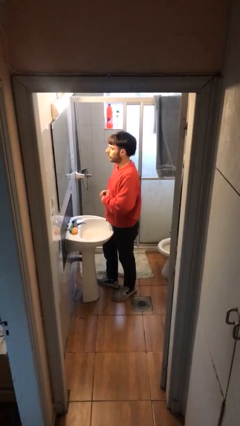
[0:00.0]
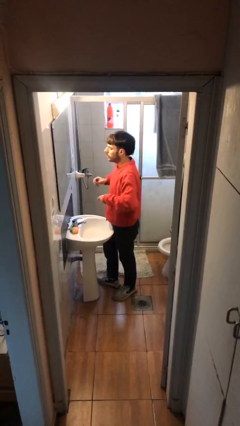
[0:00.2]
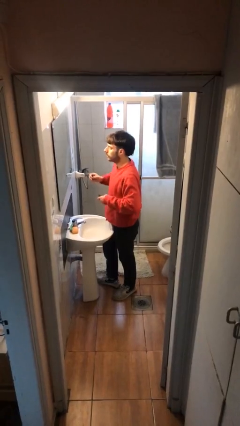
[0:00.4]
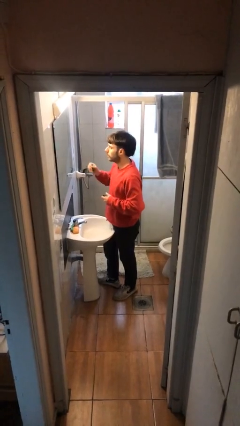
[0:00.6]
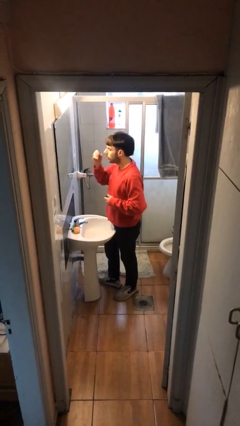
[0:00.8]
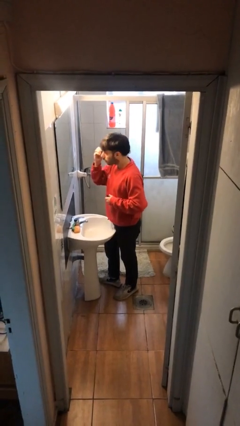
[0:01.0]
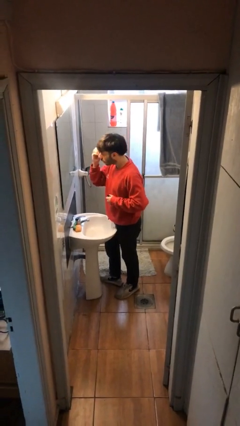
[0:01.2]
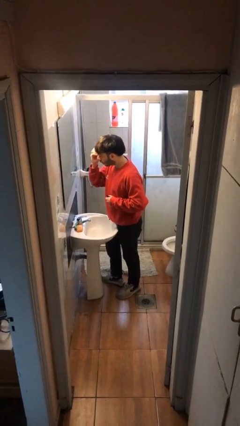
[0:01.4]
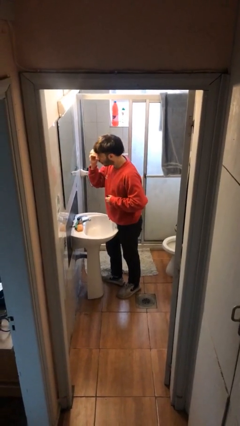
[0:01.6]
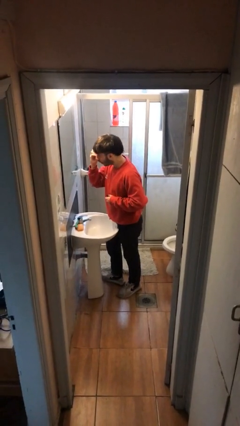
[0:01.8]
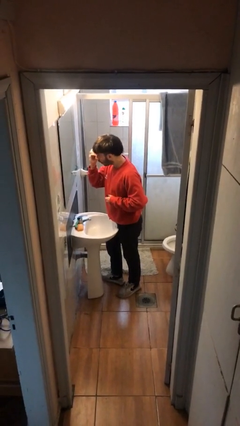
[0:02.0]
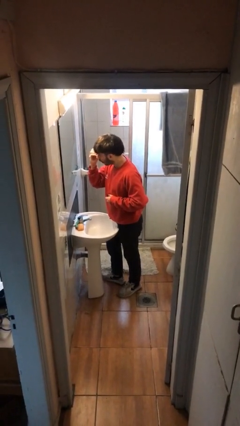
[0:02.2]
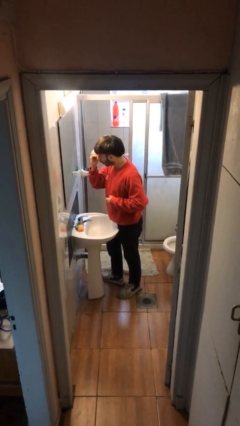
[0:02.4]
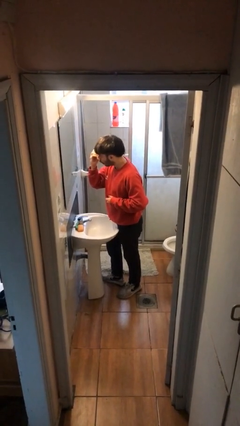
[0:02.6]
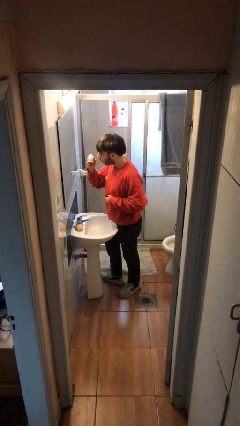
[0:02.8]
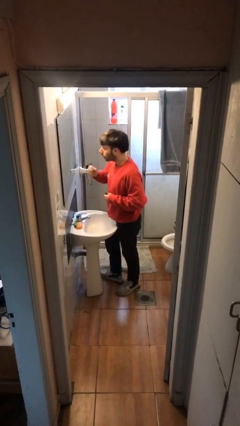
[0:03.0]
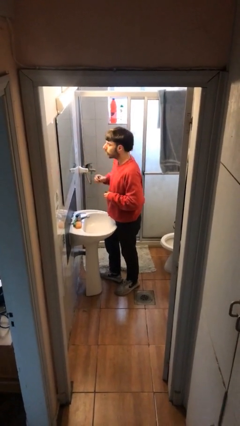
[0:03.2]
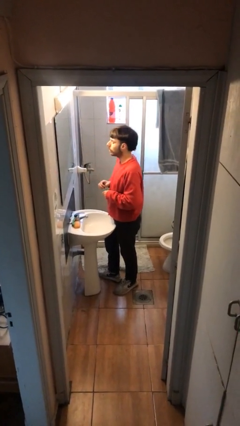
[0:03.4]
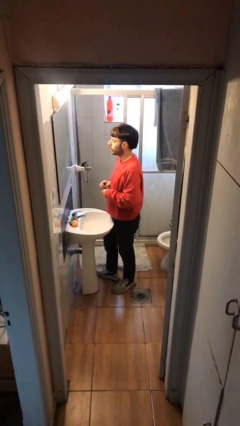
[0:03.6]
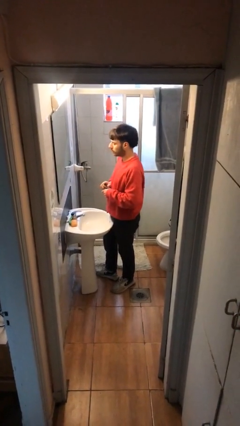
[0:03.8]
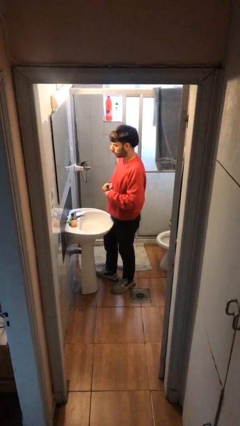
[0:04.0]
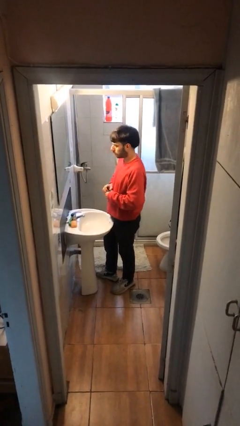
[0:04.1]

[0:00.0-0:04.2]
person applies eye makeup

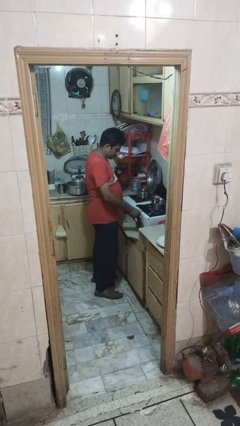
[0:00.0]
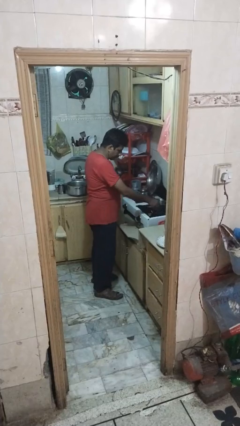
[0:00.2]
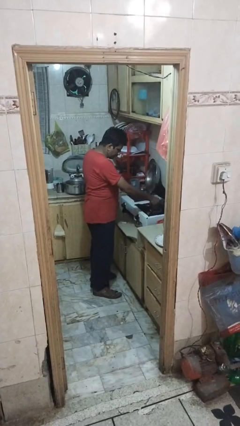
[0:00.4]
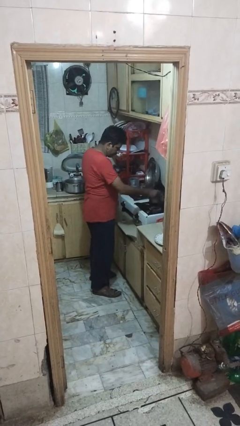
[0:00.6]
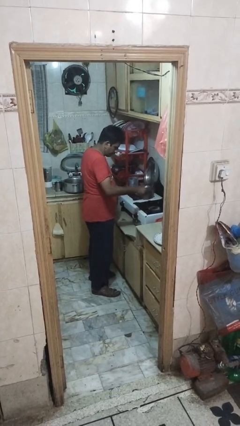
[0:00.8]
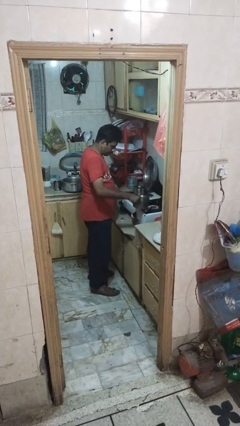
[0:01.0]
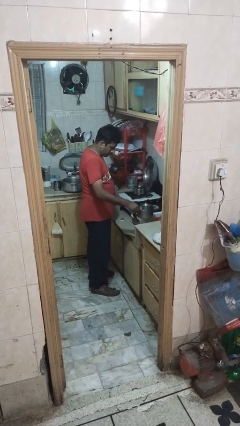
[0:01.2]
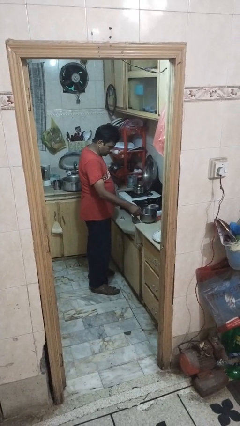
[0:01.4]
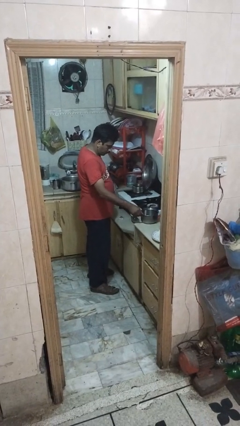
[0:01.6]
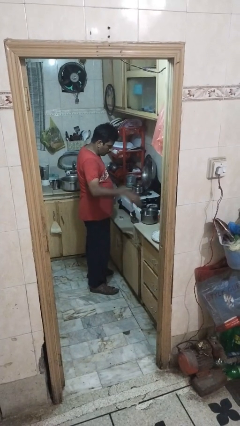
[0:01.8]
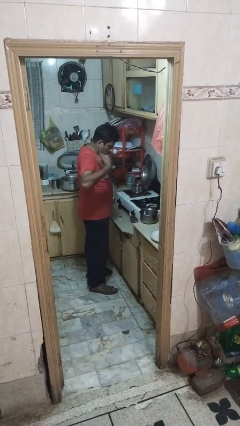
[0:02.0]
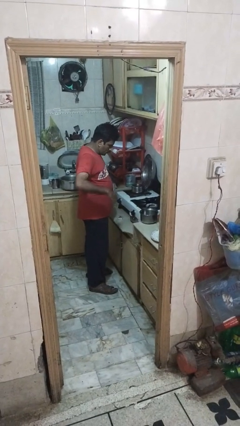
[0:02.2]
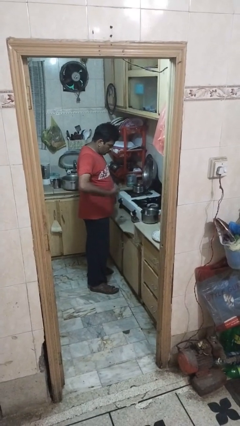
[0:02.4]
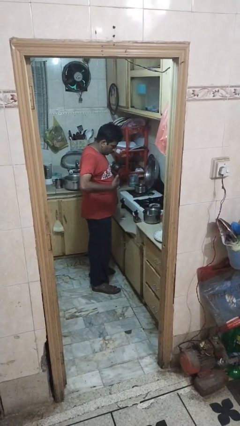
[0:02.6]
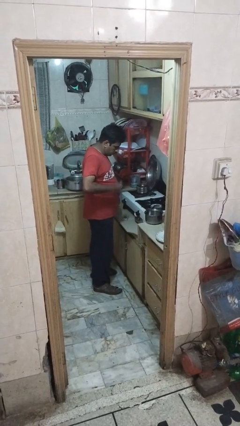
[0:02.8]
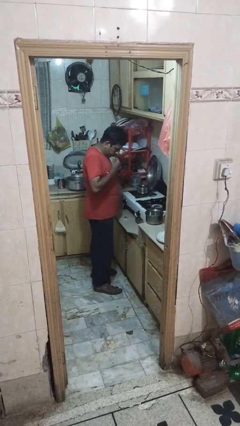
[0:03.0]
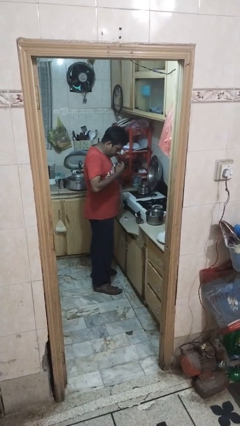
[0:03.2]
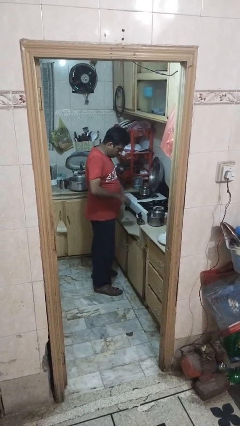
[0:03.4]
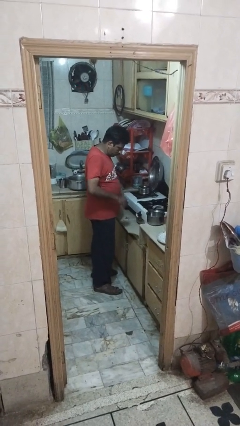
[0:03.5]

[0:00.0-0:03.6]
person burns hand

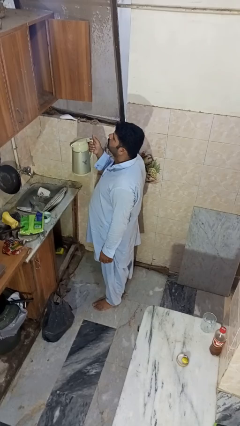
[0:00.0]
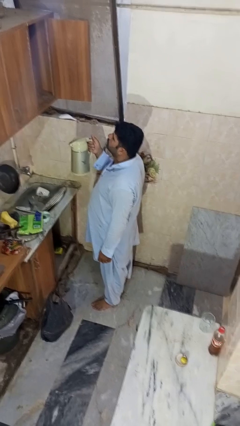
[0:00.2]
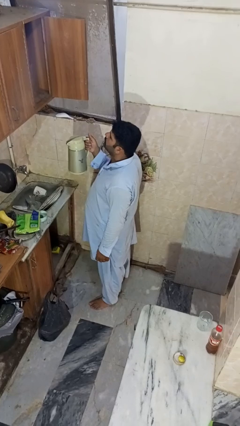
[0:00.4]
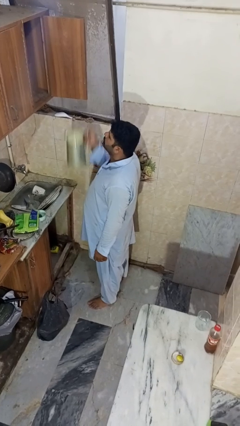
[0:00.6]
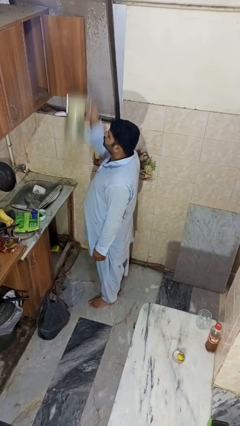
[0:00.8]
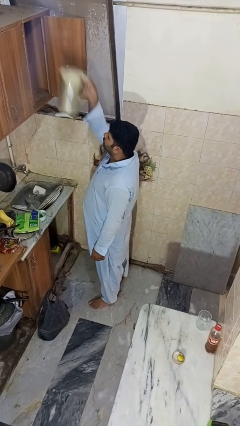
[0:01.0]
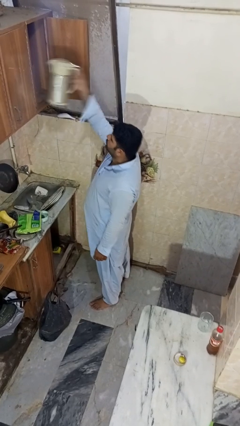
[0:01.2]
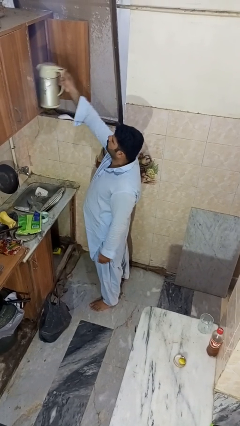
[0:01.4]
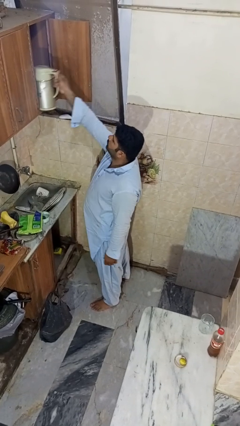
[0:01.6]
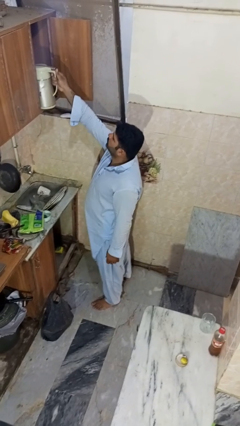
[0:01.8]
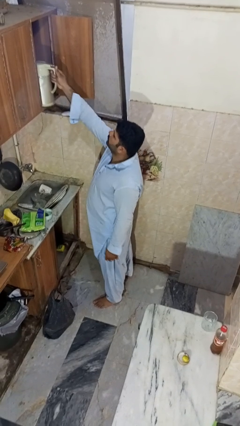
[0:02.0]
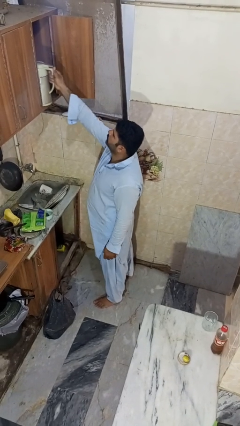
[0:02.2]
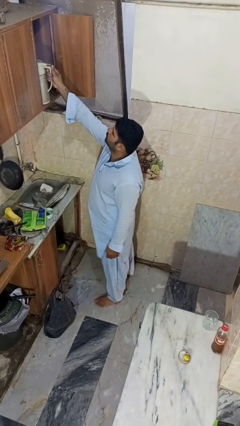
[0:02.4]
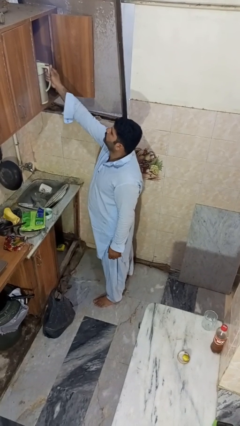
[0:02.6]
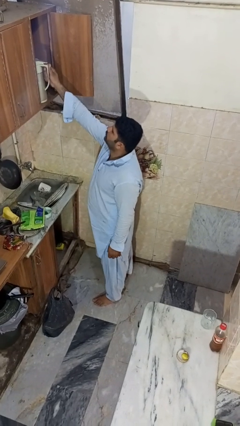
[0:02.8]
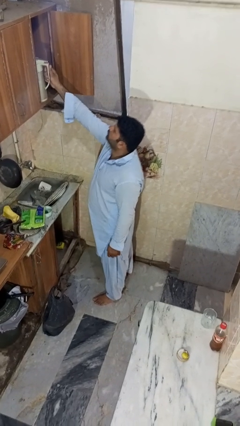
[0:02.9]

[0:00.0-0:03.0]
person puts object in cabinet

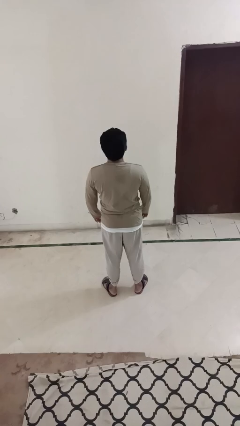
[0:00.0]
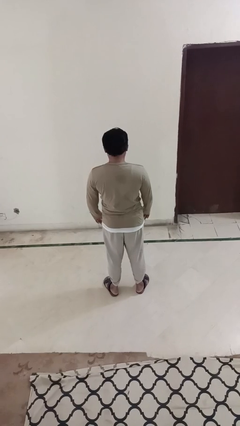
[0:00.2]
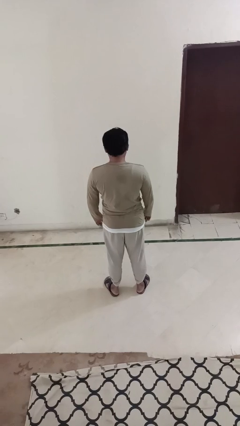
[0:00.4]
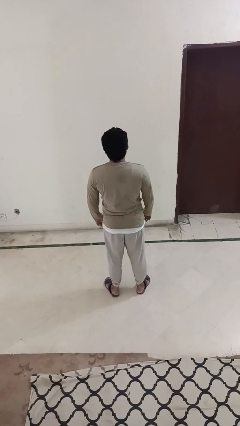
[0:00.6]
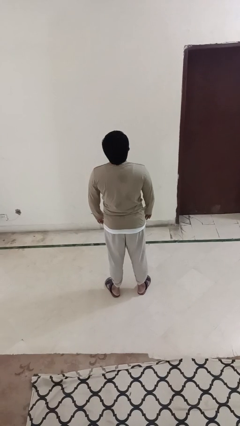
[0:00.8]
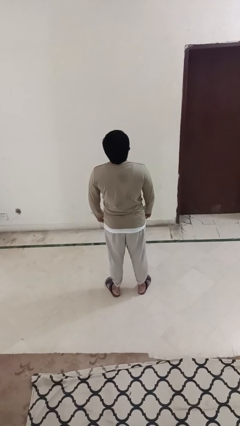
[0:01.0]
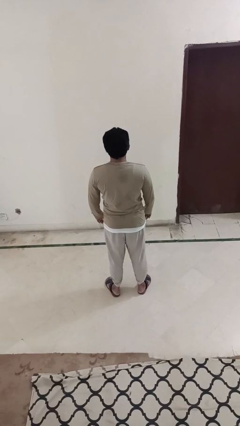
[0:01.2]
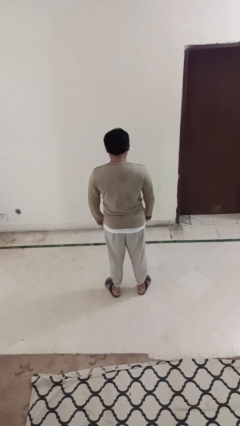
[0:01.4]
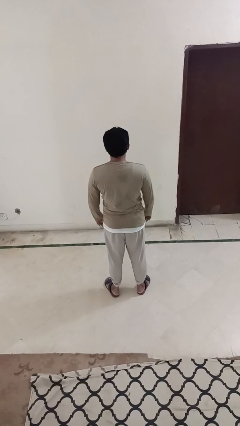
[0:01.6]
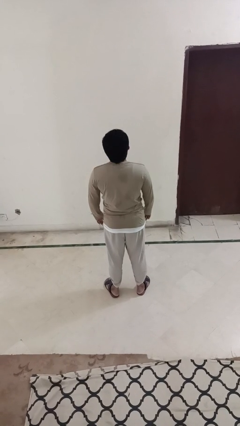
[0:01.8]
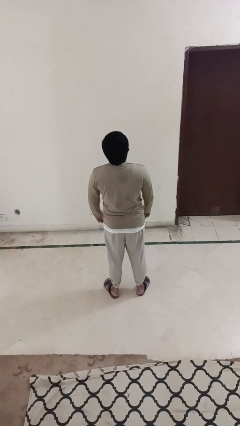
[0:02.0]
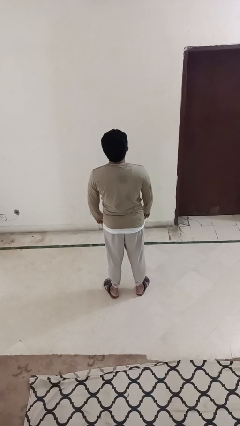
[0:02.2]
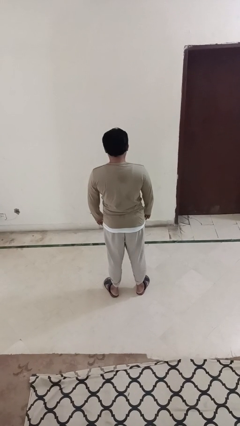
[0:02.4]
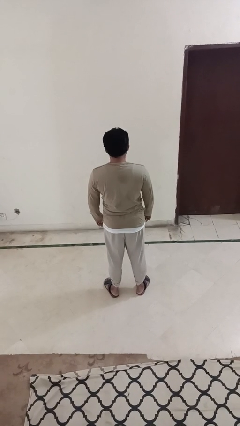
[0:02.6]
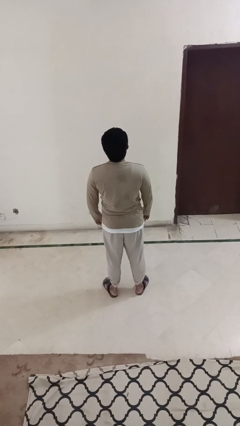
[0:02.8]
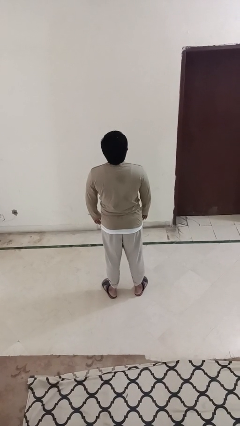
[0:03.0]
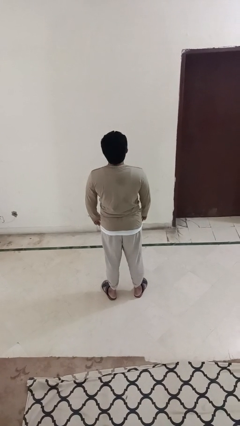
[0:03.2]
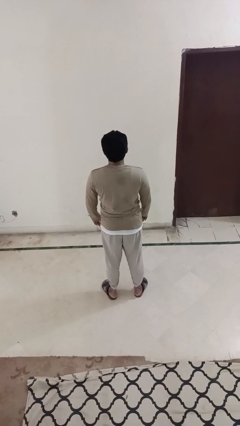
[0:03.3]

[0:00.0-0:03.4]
person nods head

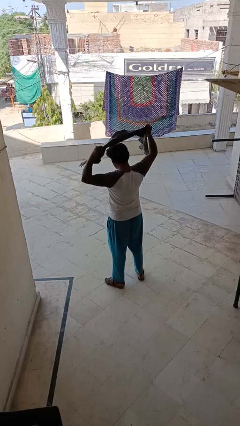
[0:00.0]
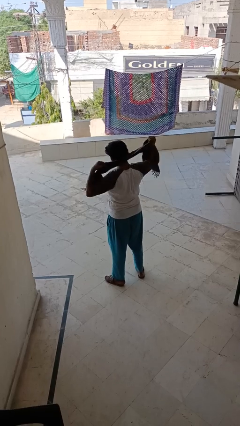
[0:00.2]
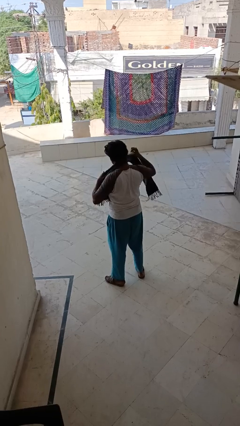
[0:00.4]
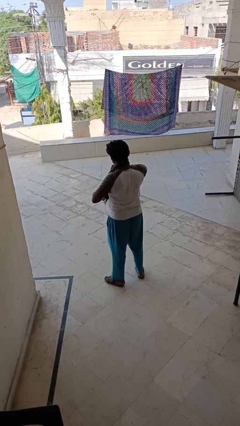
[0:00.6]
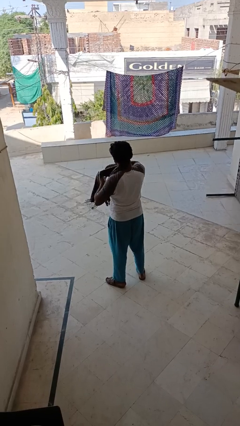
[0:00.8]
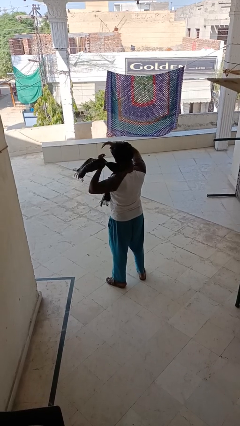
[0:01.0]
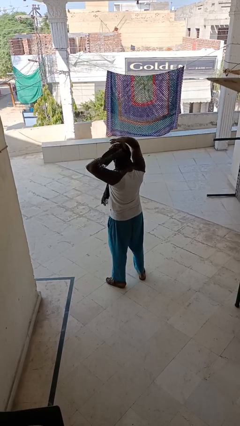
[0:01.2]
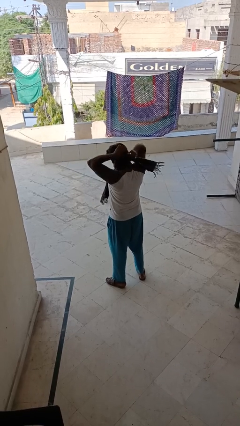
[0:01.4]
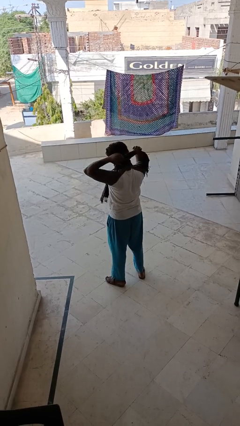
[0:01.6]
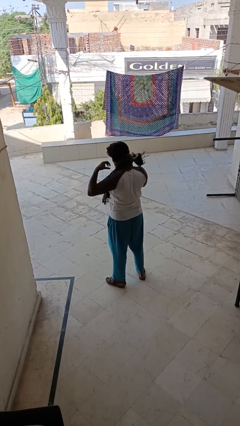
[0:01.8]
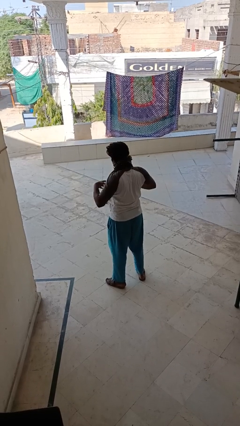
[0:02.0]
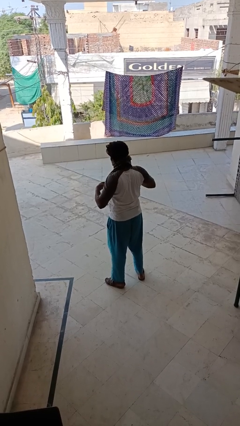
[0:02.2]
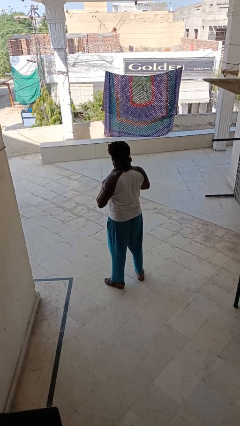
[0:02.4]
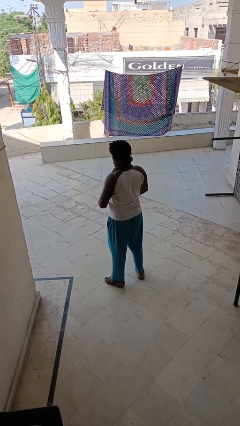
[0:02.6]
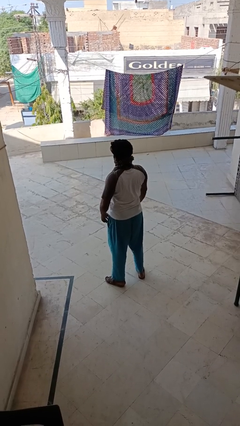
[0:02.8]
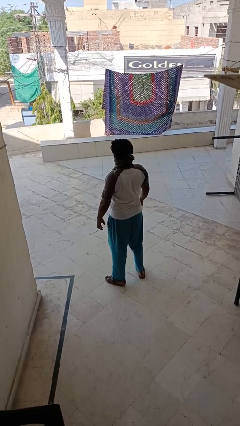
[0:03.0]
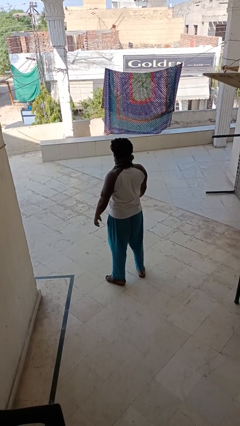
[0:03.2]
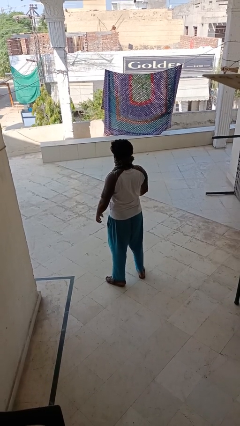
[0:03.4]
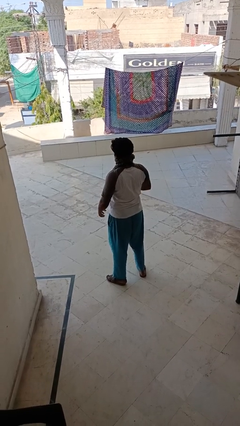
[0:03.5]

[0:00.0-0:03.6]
person puts on scarf
